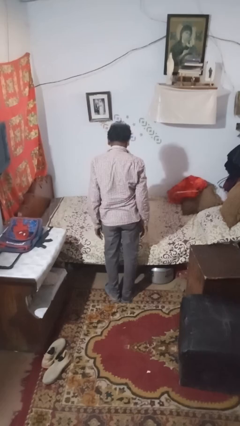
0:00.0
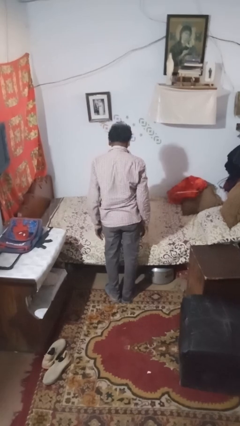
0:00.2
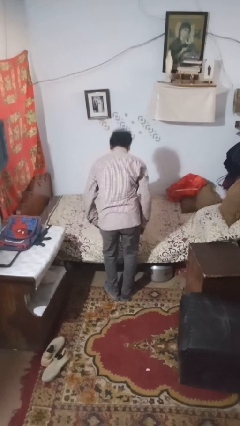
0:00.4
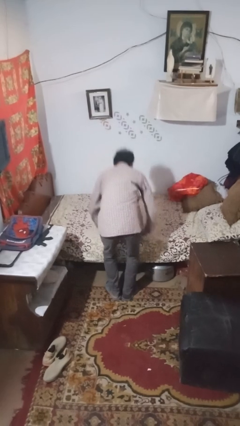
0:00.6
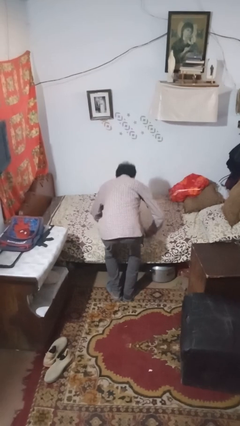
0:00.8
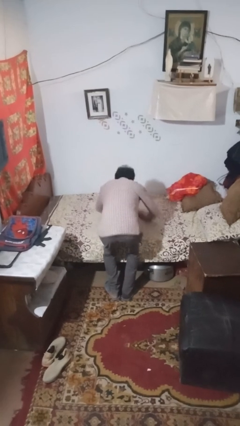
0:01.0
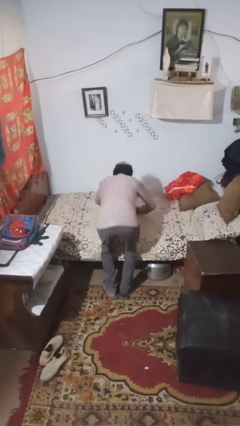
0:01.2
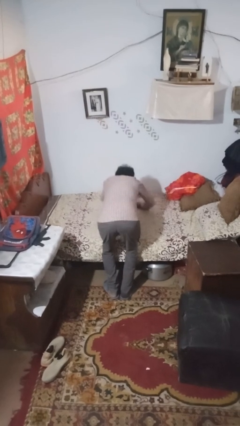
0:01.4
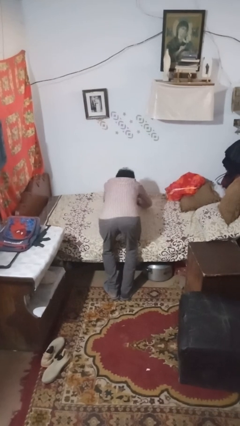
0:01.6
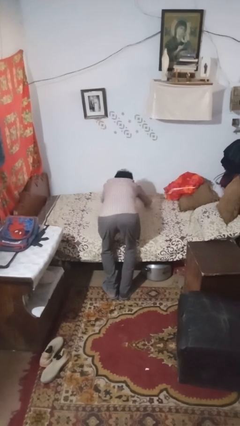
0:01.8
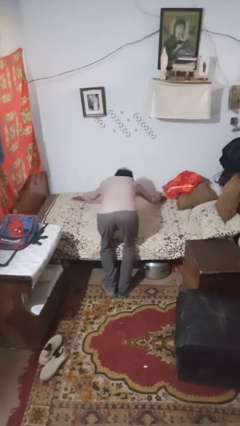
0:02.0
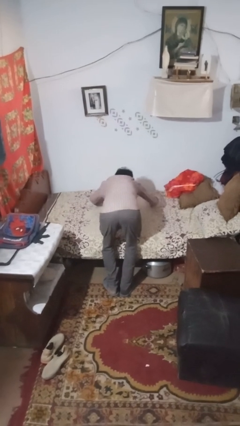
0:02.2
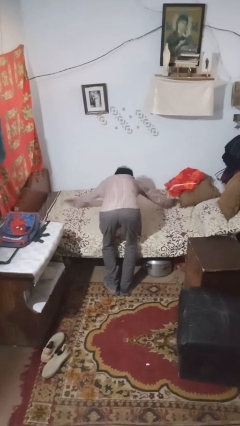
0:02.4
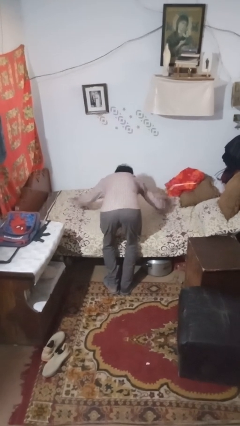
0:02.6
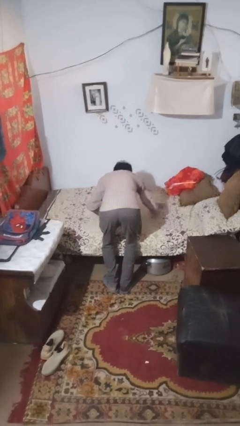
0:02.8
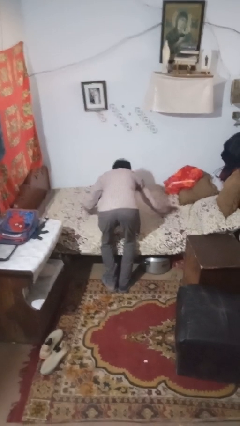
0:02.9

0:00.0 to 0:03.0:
person makes bed

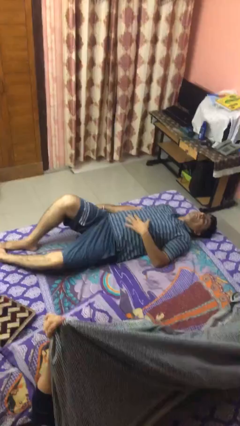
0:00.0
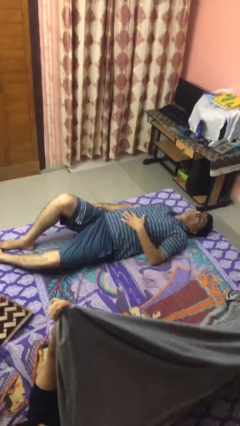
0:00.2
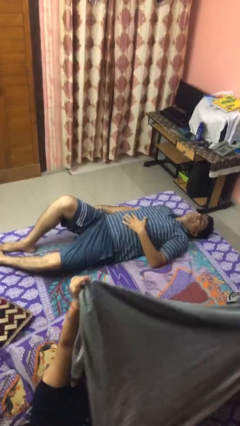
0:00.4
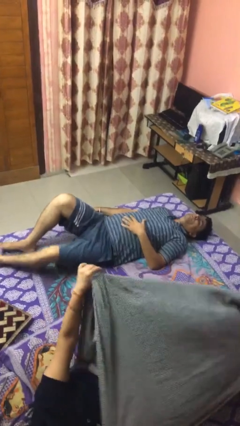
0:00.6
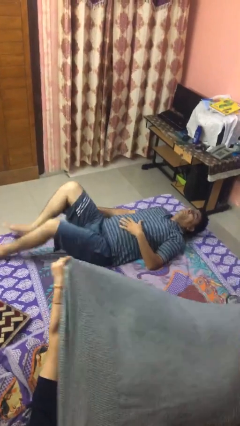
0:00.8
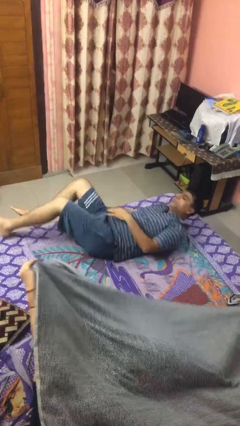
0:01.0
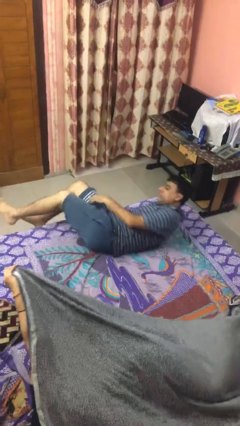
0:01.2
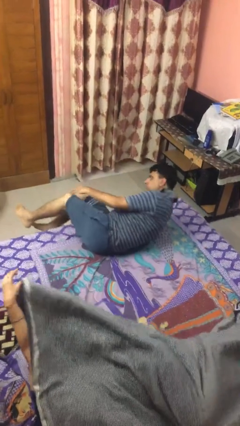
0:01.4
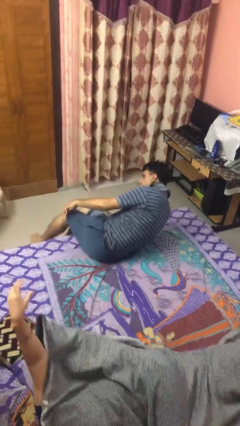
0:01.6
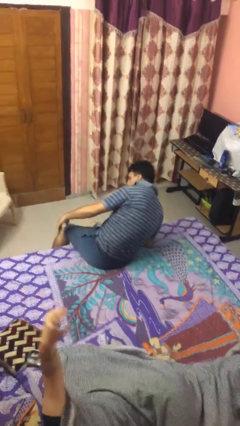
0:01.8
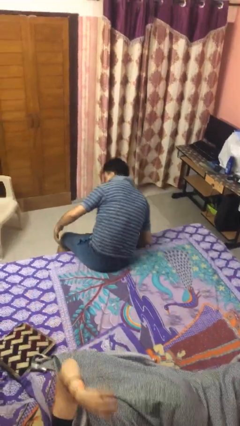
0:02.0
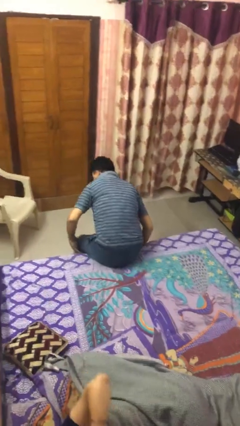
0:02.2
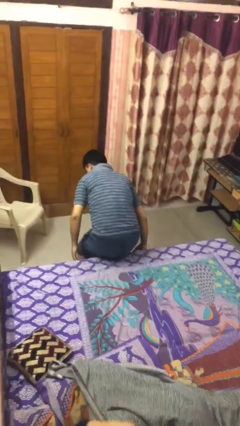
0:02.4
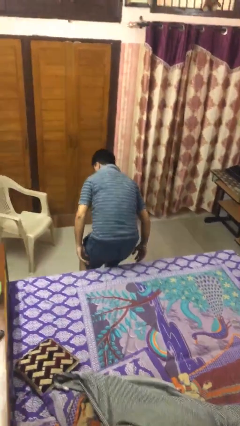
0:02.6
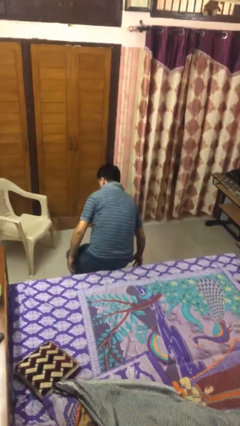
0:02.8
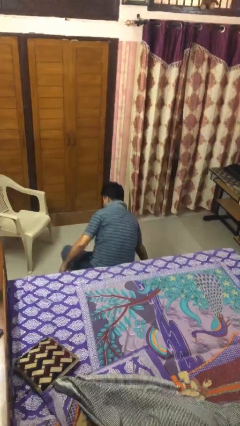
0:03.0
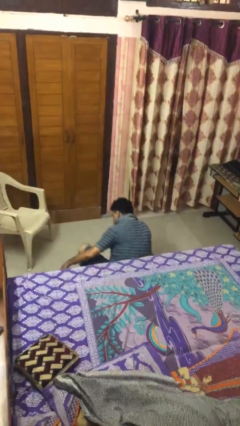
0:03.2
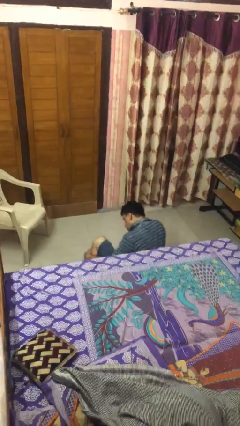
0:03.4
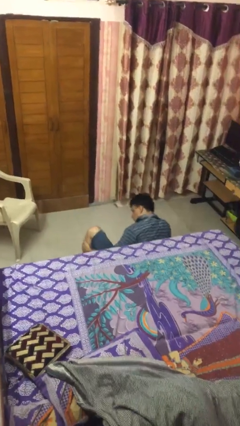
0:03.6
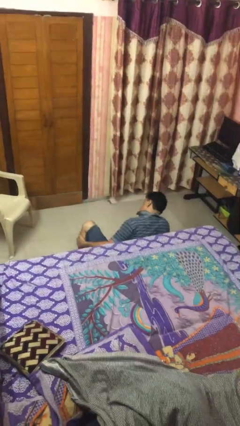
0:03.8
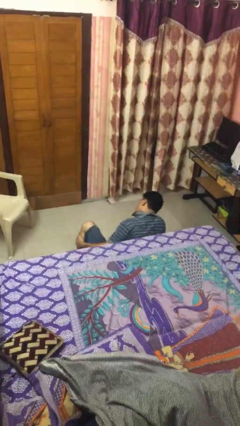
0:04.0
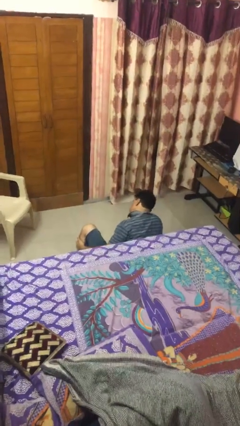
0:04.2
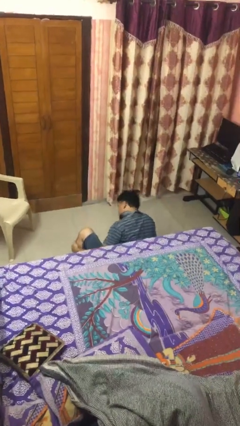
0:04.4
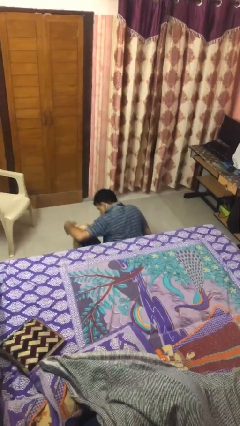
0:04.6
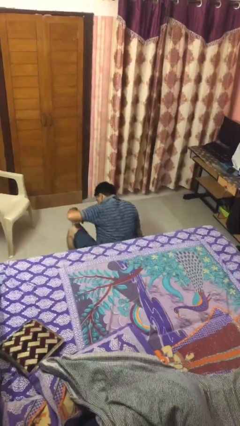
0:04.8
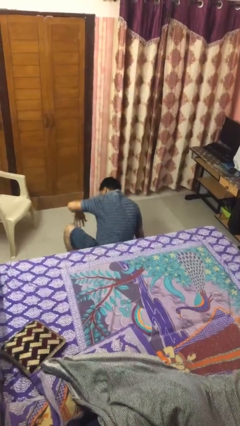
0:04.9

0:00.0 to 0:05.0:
person falls from bed

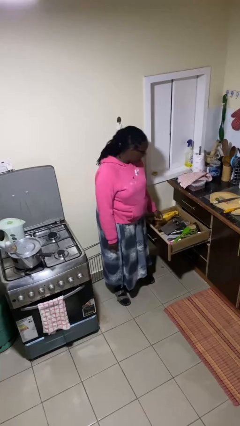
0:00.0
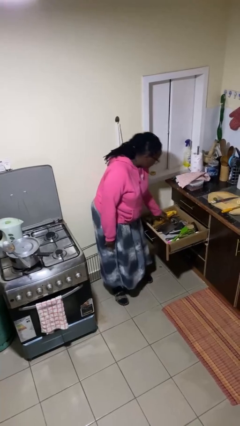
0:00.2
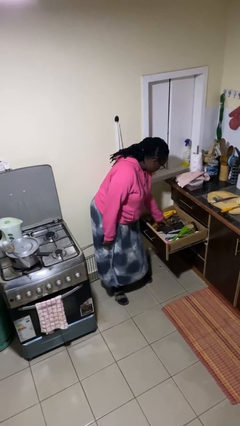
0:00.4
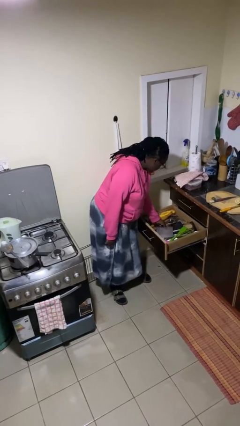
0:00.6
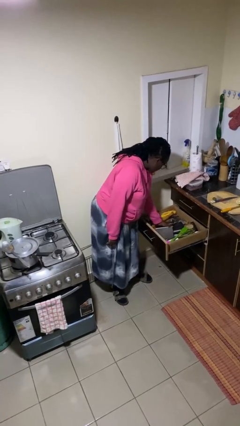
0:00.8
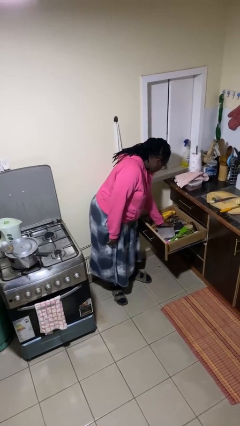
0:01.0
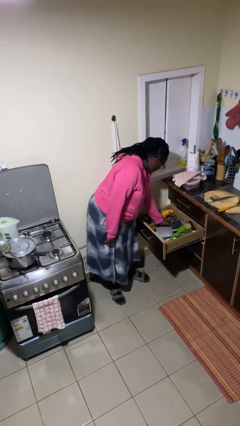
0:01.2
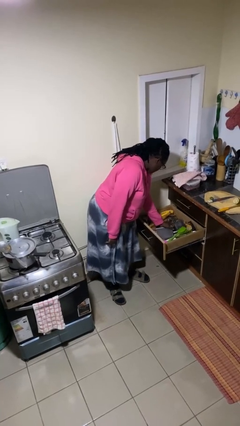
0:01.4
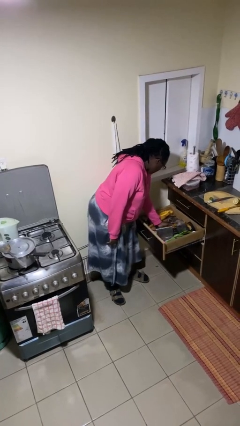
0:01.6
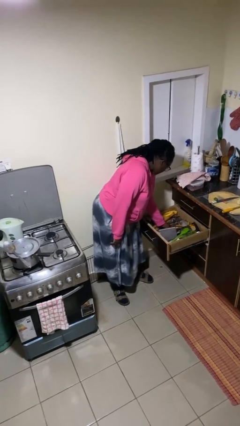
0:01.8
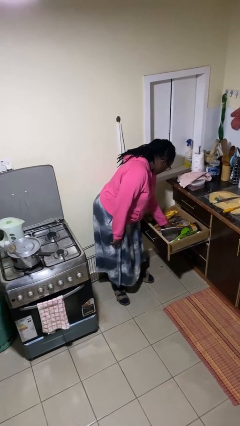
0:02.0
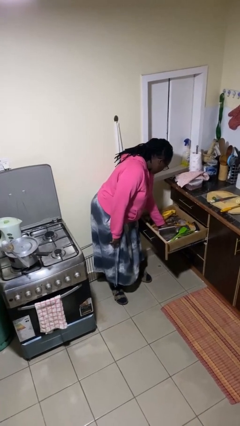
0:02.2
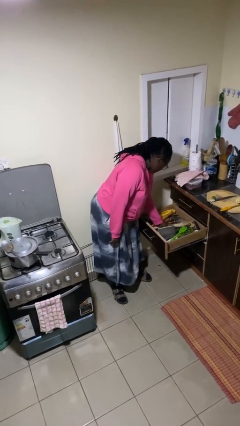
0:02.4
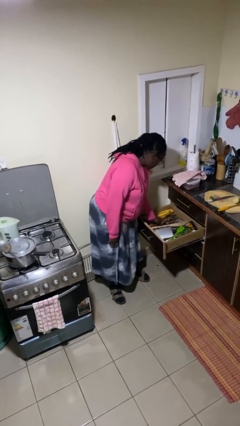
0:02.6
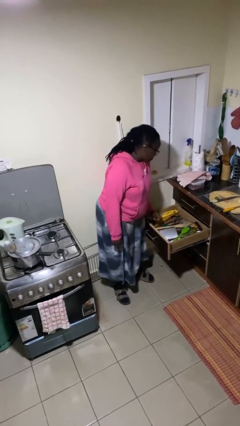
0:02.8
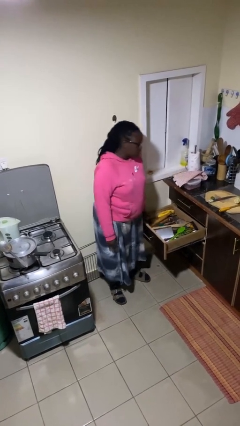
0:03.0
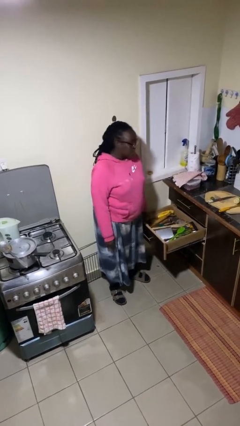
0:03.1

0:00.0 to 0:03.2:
person searches in kitchen drawer

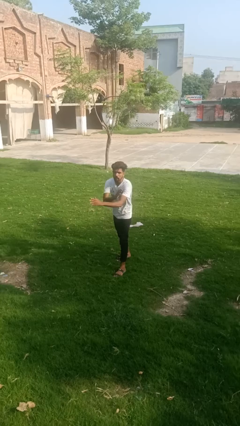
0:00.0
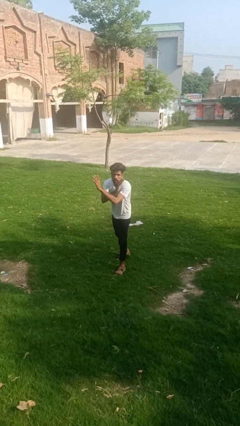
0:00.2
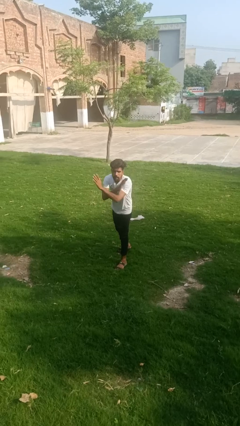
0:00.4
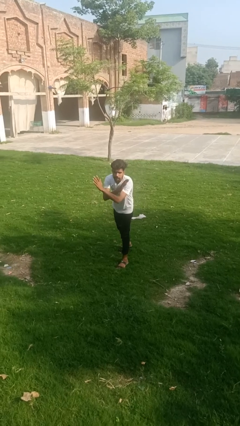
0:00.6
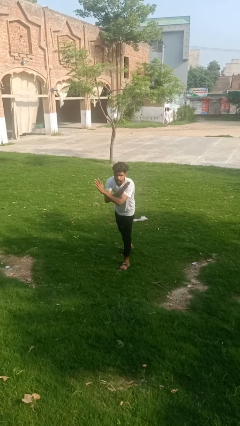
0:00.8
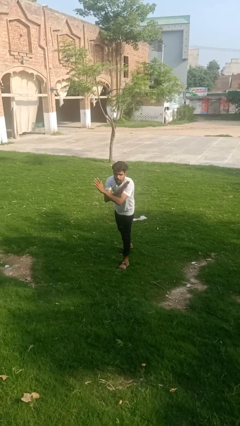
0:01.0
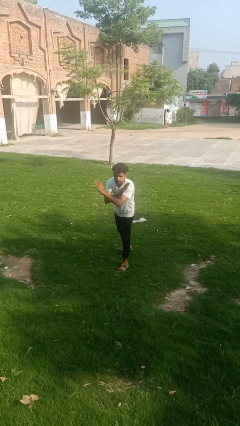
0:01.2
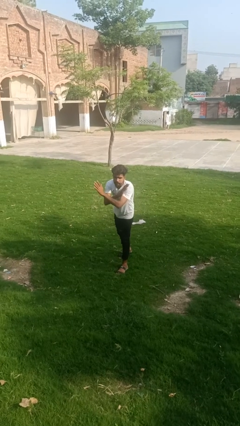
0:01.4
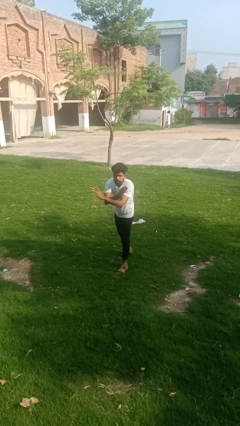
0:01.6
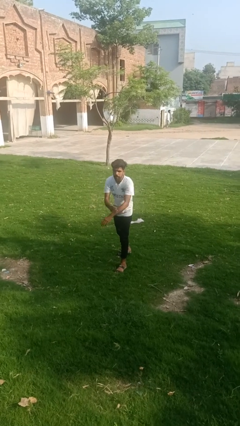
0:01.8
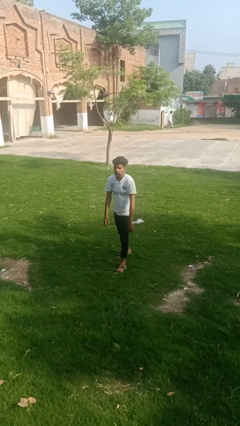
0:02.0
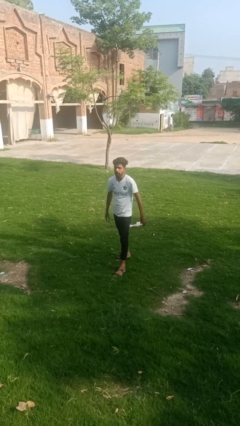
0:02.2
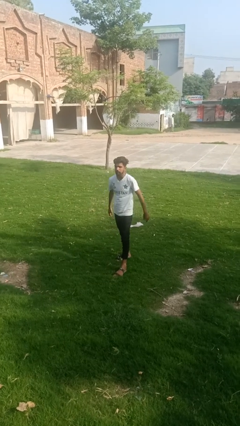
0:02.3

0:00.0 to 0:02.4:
person crosses arms

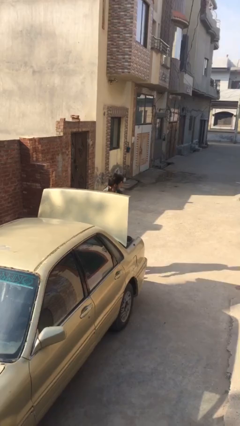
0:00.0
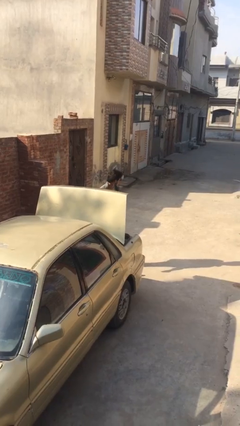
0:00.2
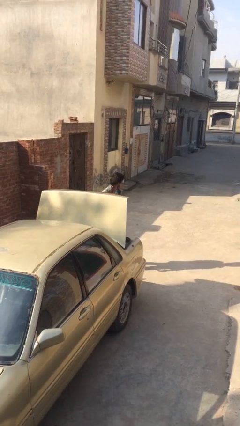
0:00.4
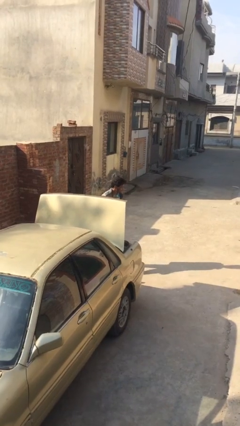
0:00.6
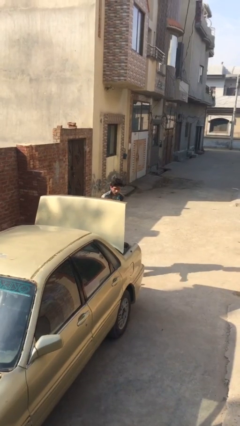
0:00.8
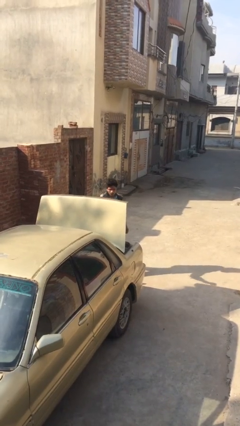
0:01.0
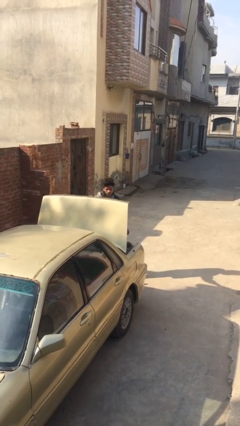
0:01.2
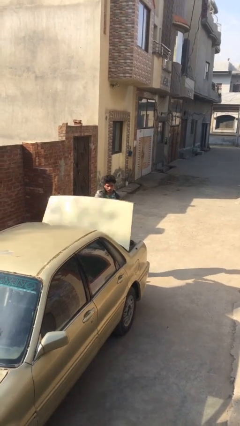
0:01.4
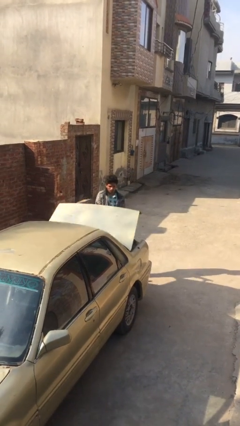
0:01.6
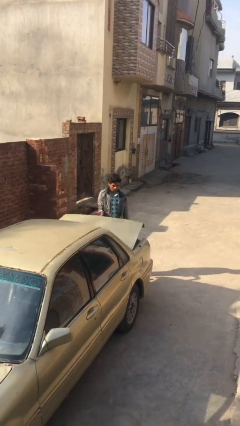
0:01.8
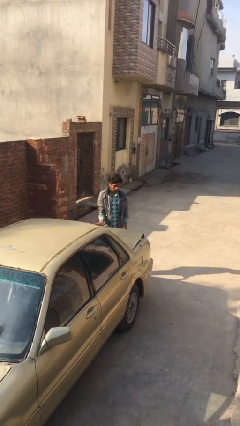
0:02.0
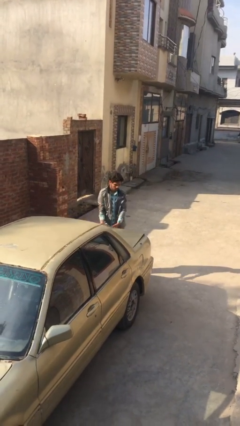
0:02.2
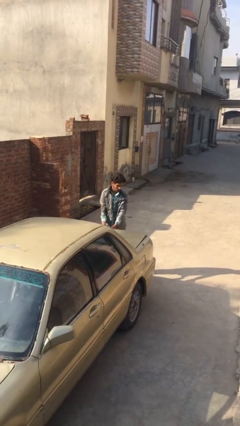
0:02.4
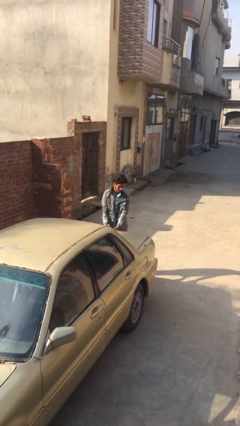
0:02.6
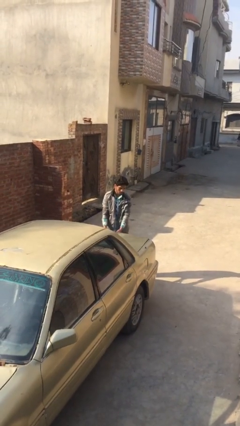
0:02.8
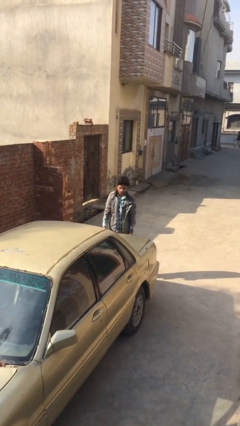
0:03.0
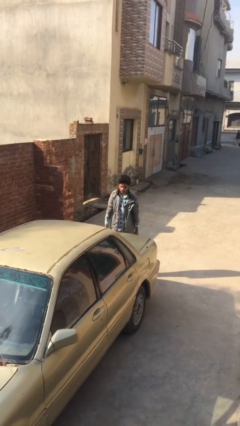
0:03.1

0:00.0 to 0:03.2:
person closes car trunk

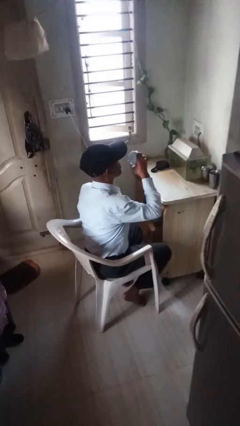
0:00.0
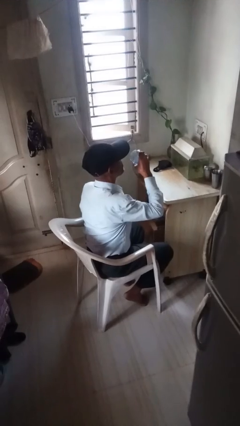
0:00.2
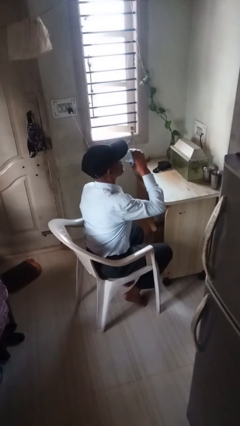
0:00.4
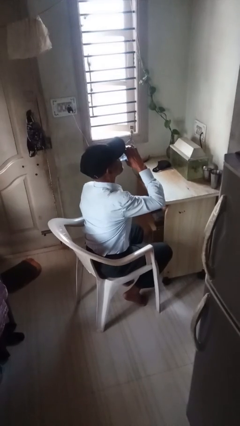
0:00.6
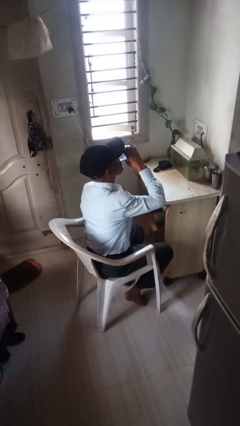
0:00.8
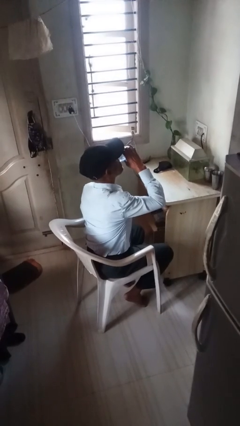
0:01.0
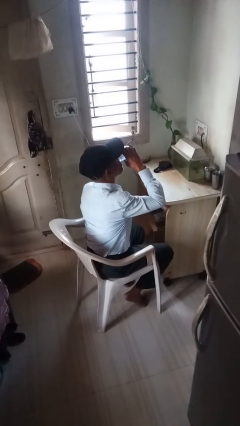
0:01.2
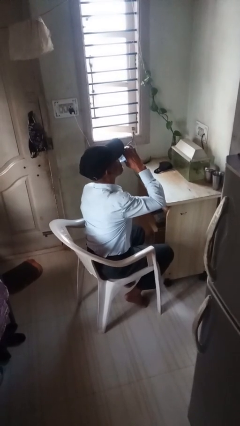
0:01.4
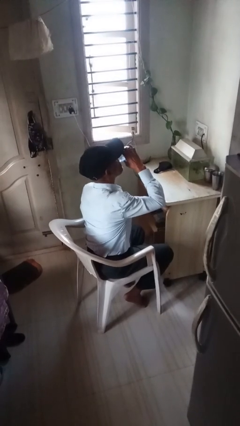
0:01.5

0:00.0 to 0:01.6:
person drinks from shotglass
